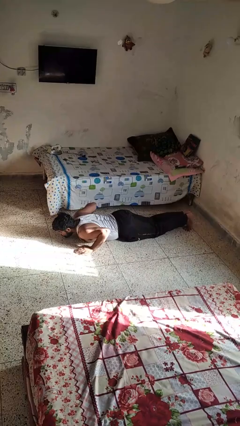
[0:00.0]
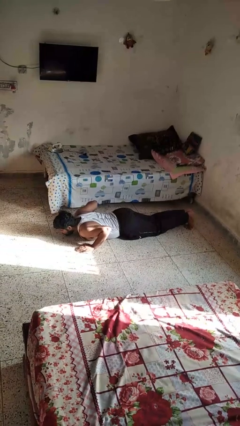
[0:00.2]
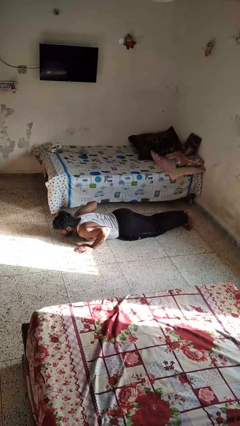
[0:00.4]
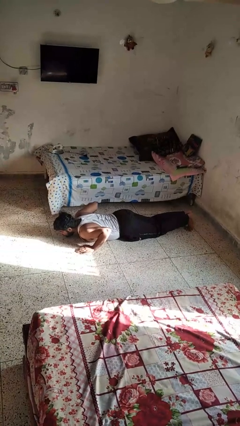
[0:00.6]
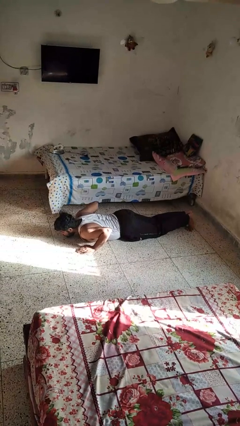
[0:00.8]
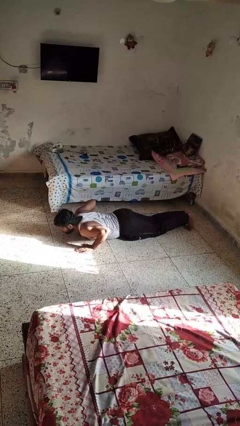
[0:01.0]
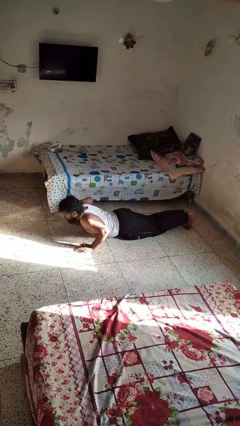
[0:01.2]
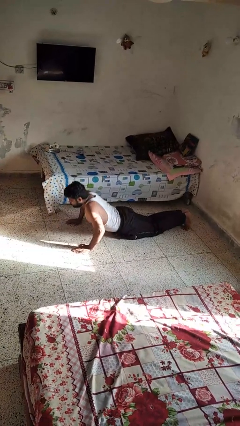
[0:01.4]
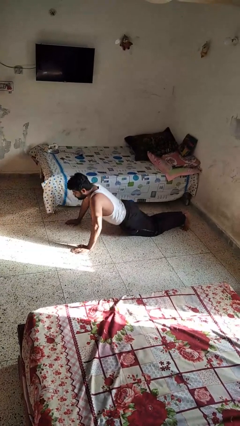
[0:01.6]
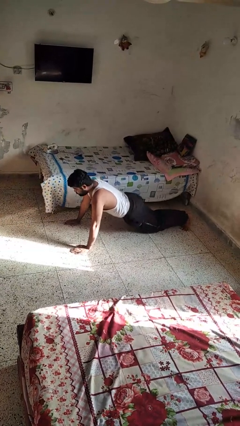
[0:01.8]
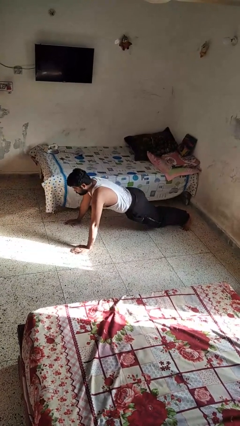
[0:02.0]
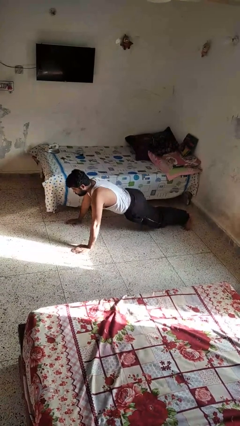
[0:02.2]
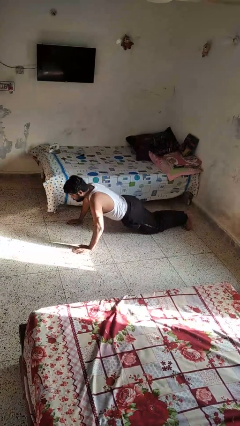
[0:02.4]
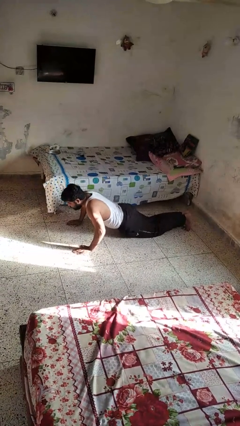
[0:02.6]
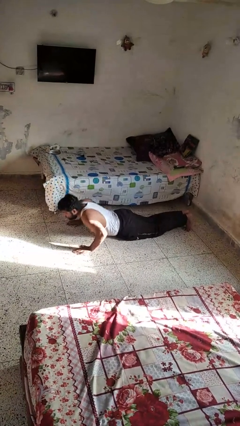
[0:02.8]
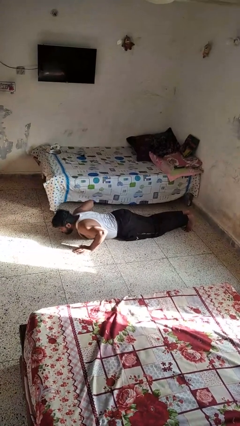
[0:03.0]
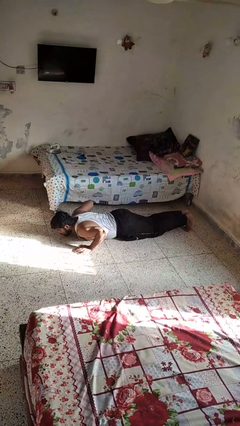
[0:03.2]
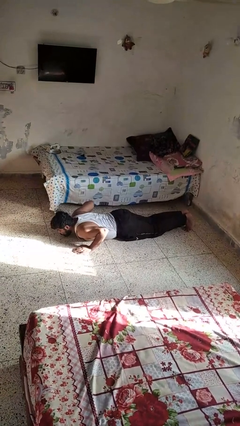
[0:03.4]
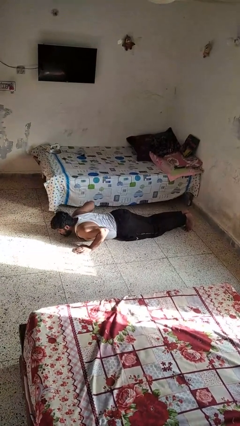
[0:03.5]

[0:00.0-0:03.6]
person exercises with pushup

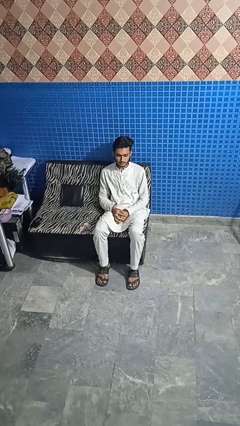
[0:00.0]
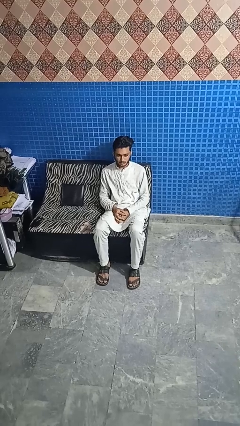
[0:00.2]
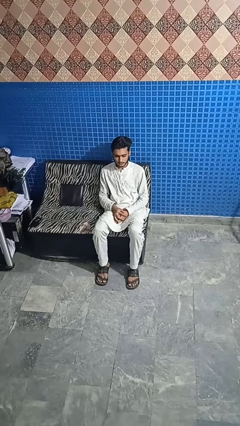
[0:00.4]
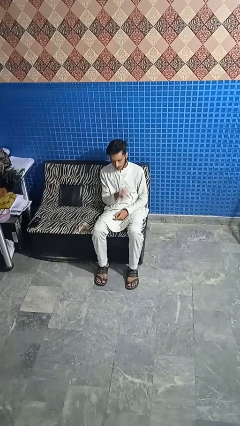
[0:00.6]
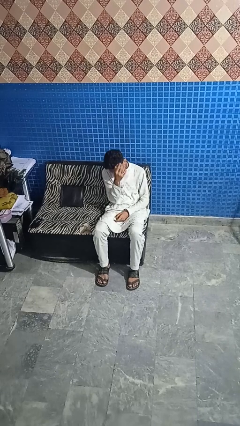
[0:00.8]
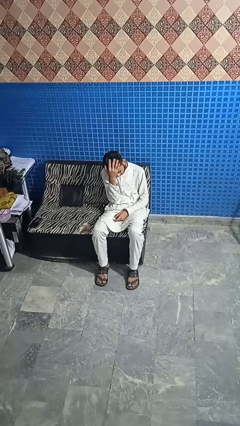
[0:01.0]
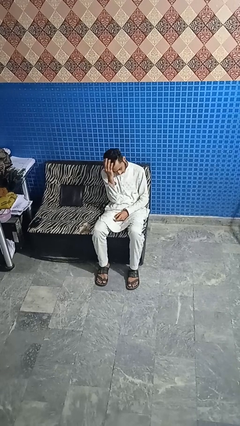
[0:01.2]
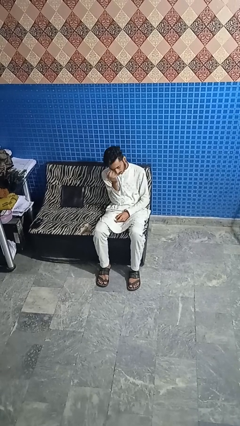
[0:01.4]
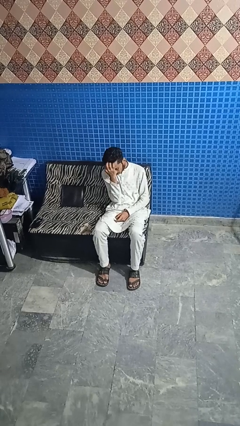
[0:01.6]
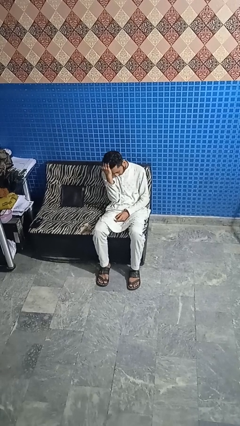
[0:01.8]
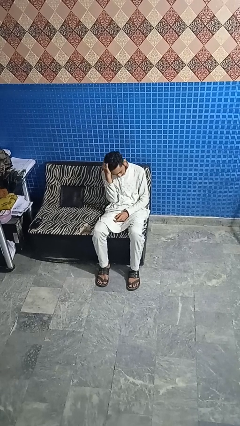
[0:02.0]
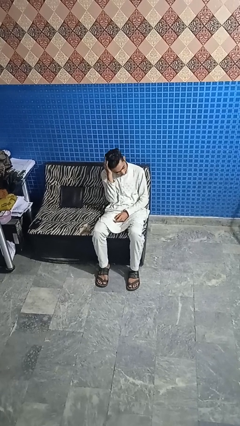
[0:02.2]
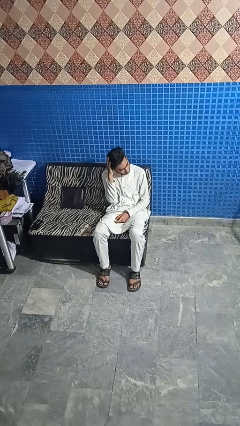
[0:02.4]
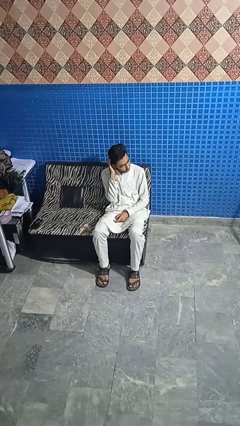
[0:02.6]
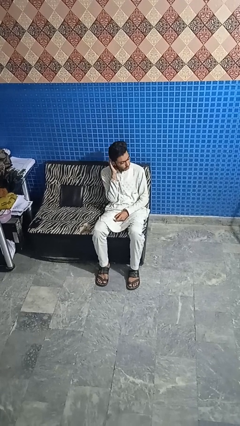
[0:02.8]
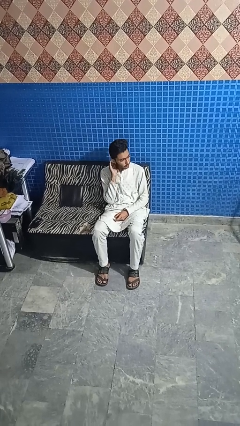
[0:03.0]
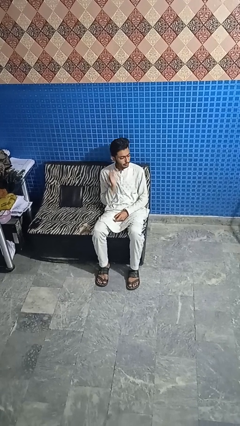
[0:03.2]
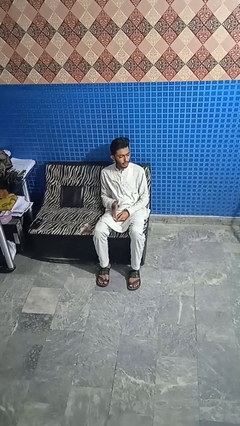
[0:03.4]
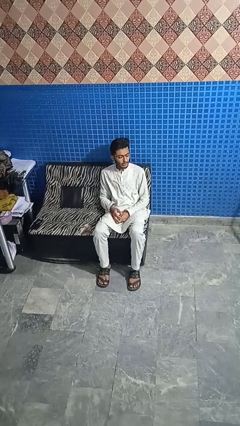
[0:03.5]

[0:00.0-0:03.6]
person strokes hair

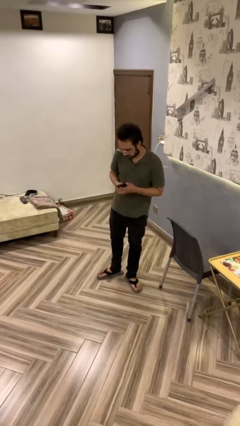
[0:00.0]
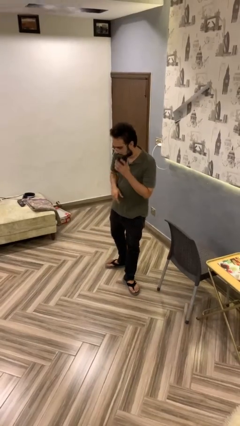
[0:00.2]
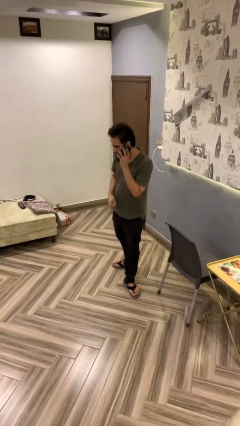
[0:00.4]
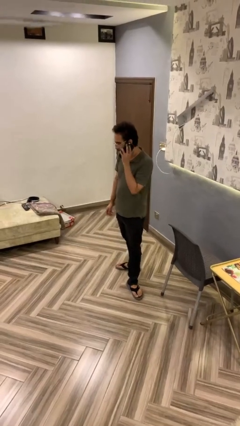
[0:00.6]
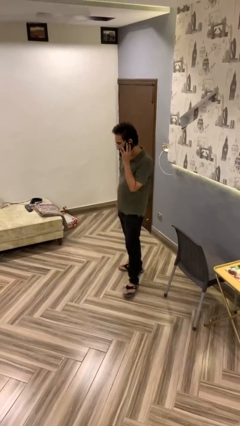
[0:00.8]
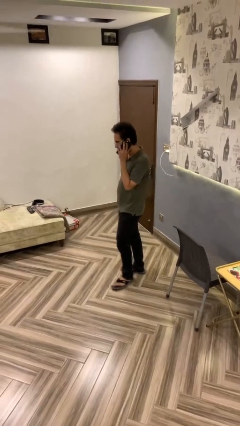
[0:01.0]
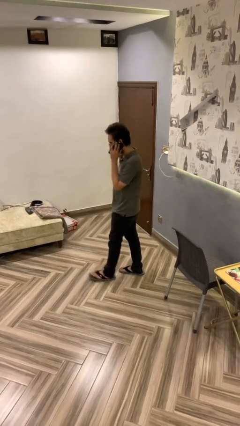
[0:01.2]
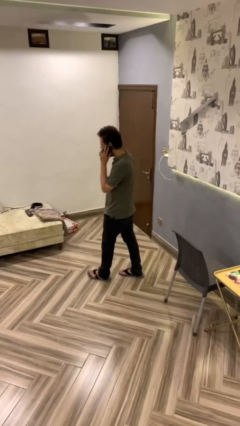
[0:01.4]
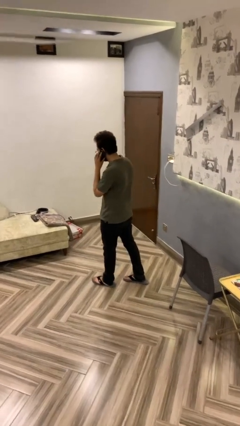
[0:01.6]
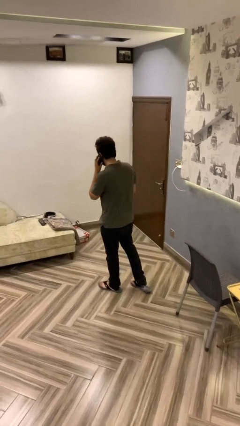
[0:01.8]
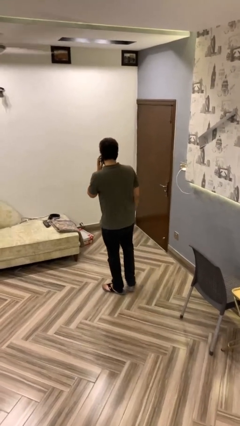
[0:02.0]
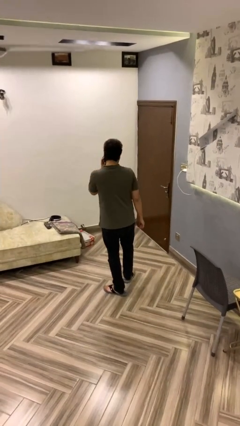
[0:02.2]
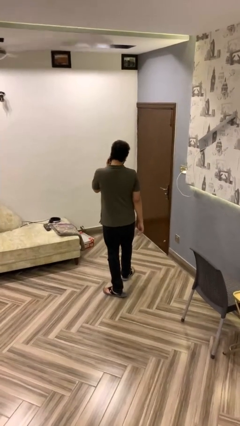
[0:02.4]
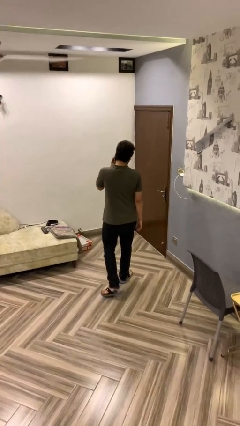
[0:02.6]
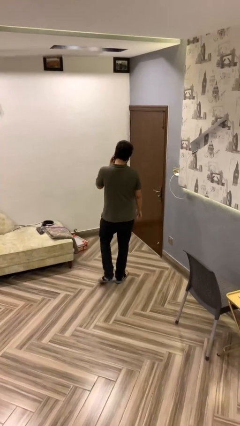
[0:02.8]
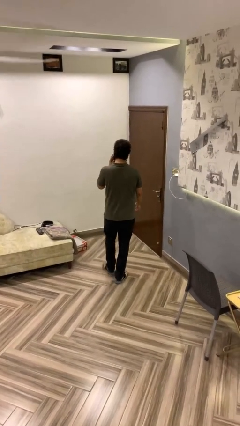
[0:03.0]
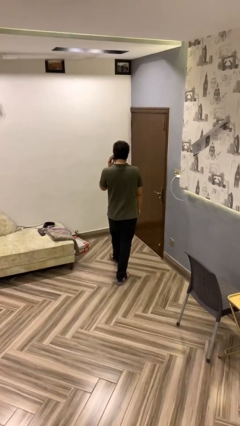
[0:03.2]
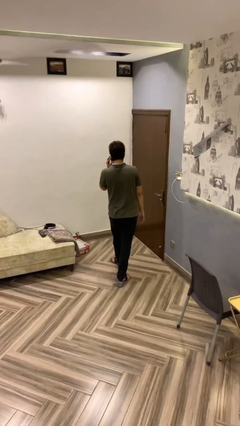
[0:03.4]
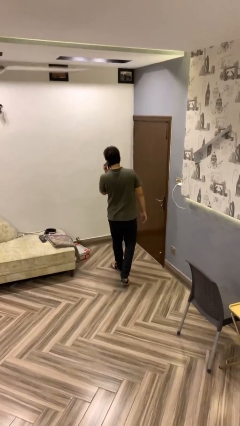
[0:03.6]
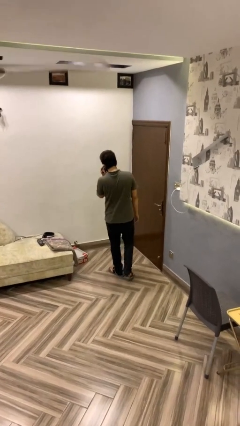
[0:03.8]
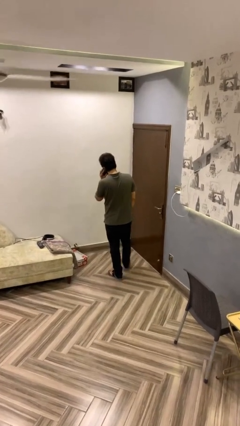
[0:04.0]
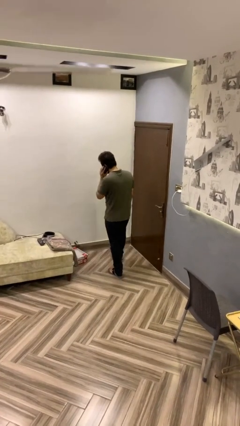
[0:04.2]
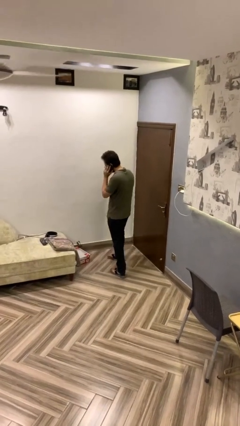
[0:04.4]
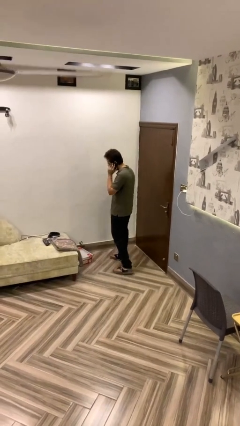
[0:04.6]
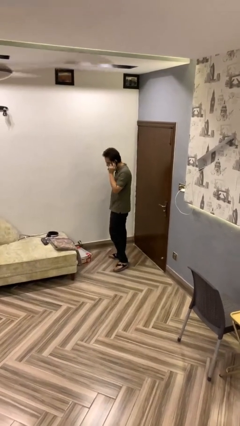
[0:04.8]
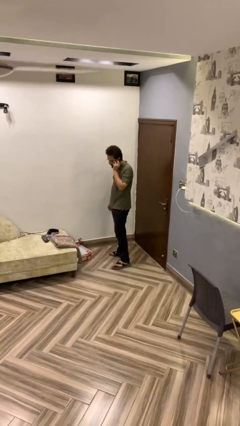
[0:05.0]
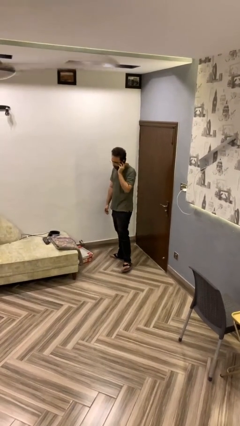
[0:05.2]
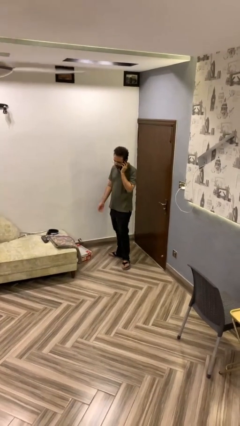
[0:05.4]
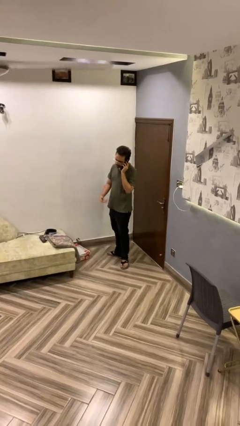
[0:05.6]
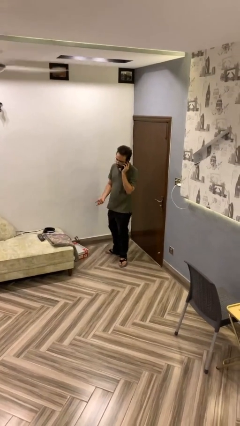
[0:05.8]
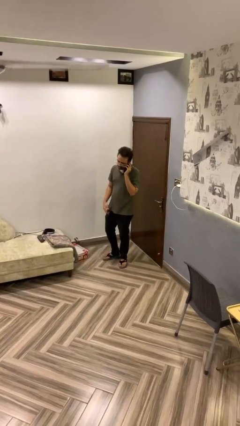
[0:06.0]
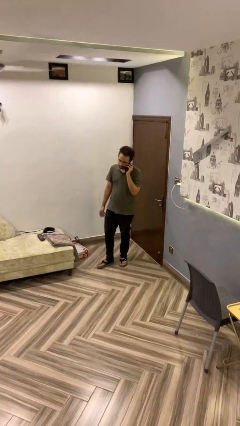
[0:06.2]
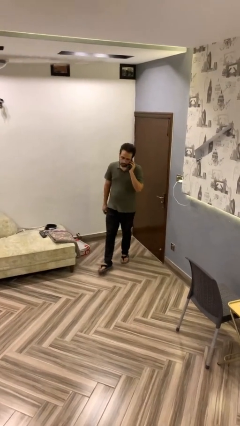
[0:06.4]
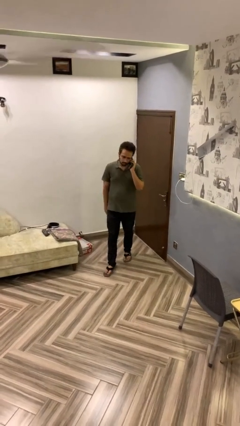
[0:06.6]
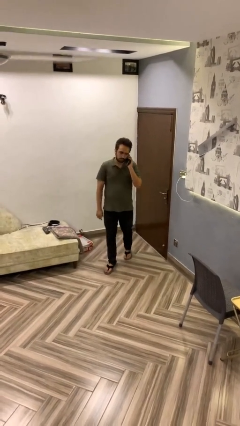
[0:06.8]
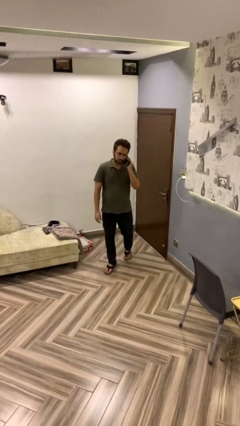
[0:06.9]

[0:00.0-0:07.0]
person talks on phone

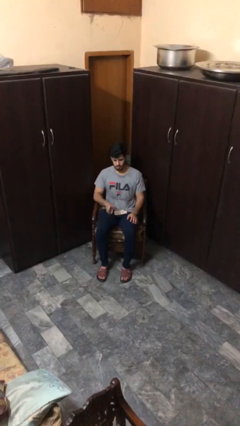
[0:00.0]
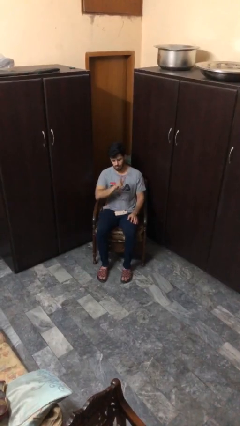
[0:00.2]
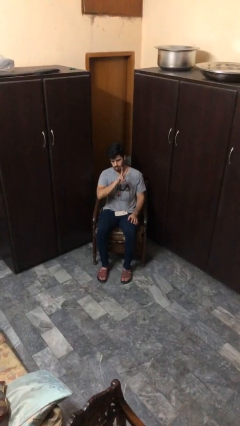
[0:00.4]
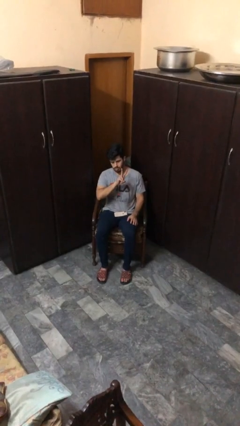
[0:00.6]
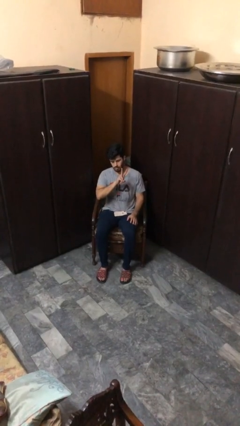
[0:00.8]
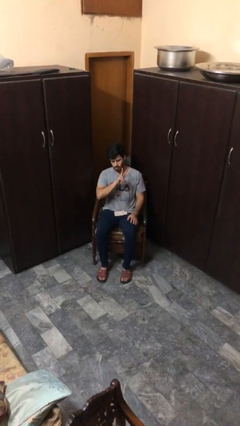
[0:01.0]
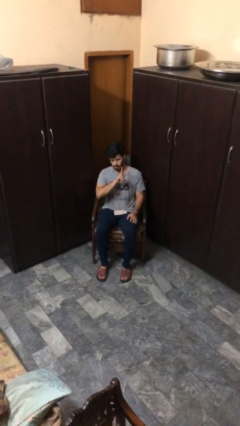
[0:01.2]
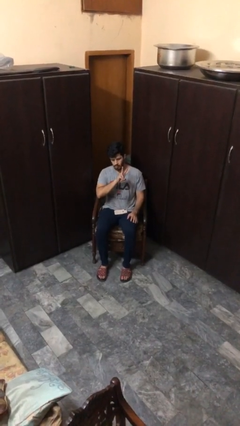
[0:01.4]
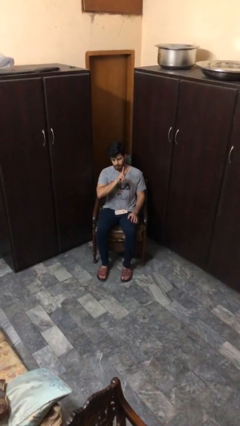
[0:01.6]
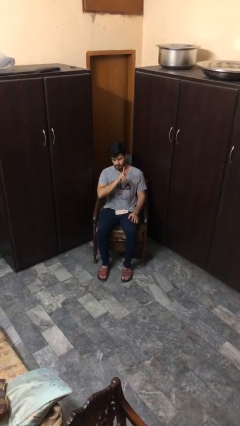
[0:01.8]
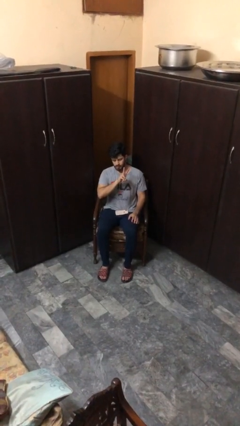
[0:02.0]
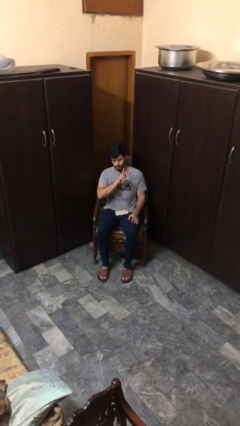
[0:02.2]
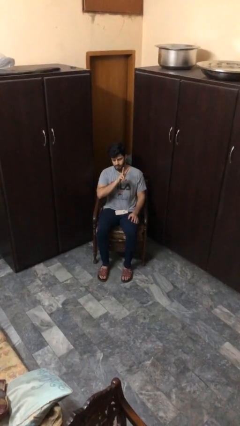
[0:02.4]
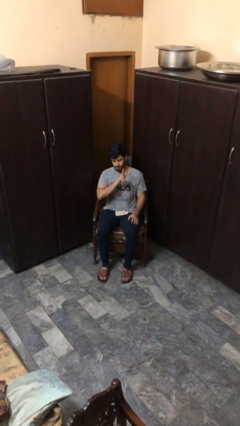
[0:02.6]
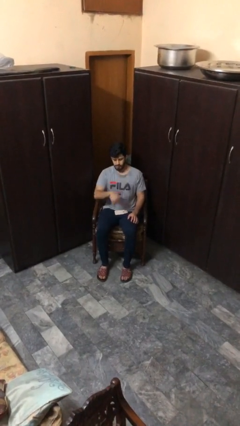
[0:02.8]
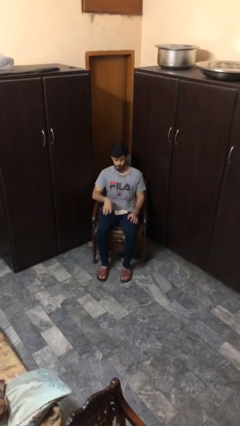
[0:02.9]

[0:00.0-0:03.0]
person gestures peace
